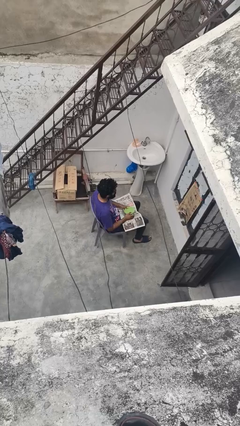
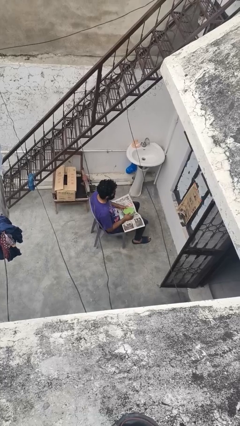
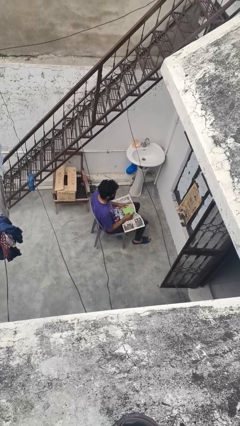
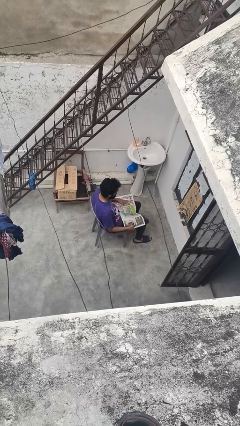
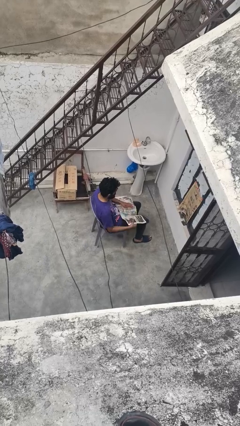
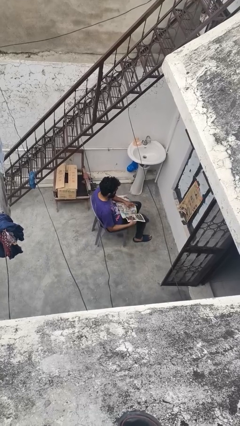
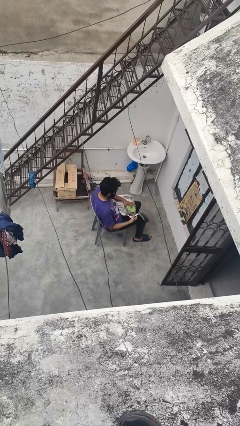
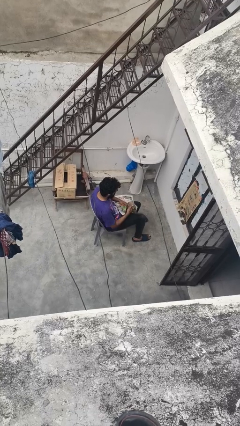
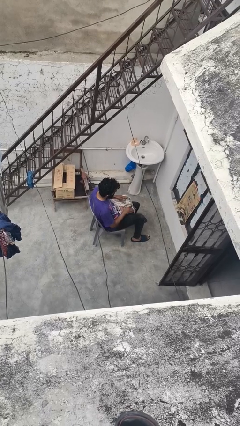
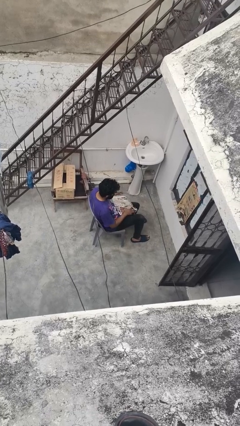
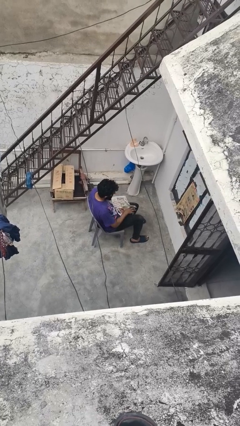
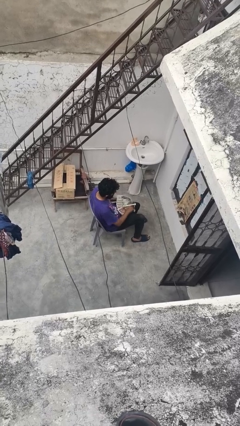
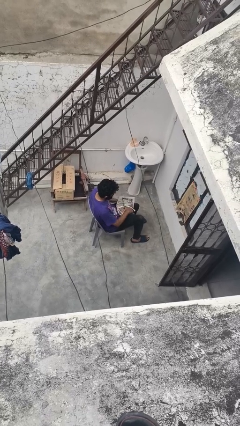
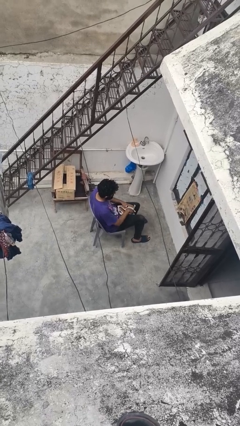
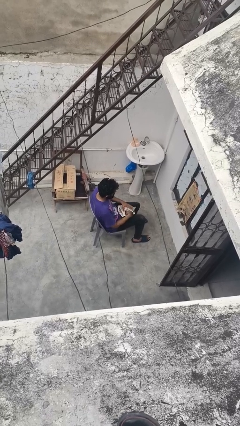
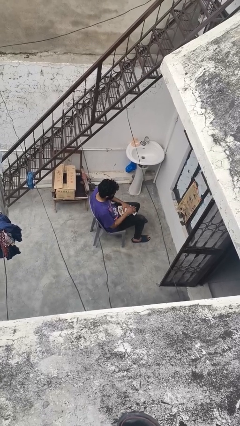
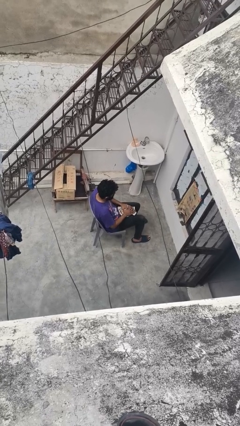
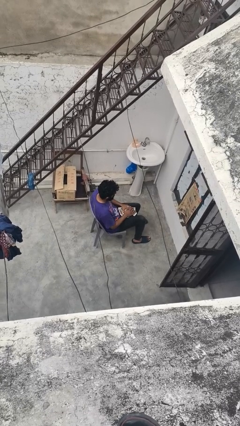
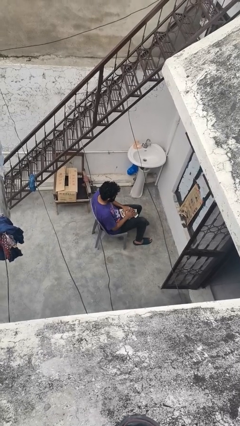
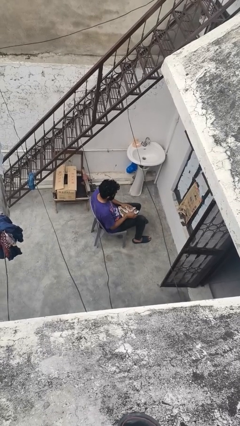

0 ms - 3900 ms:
person wraps box

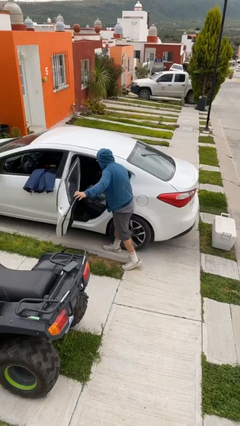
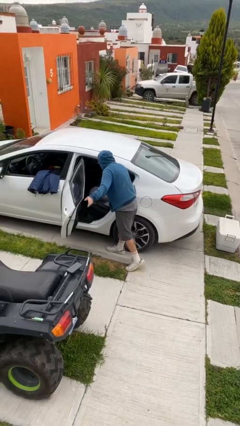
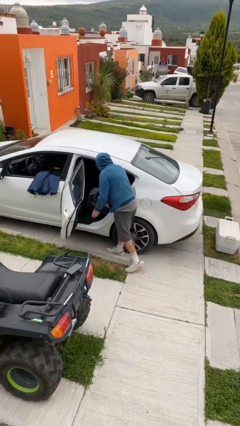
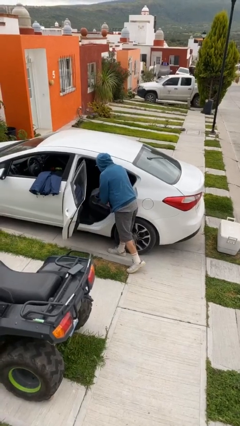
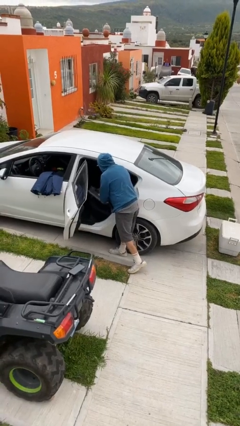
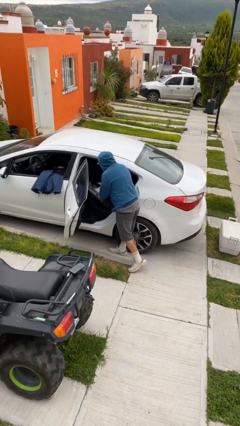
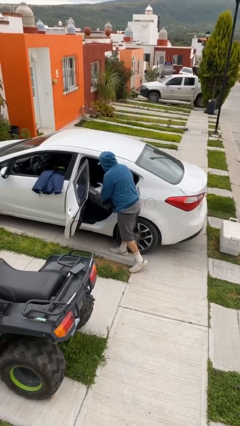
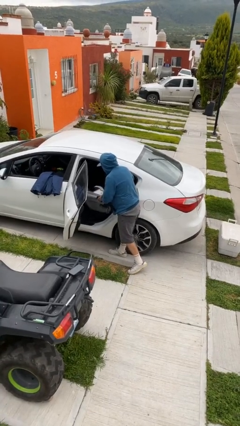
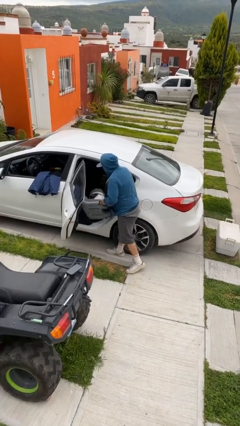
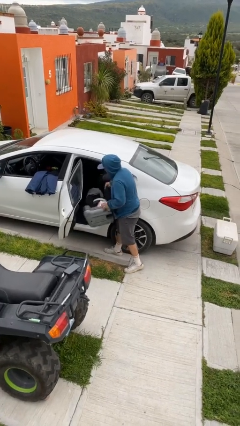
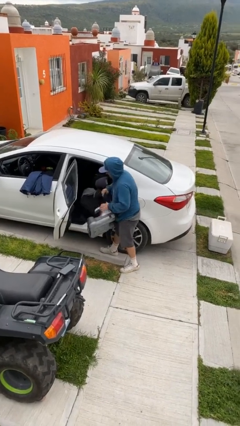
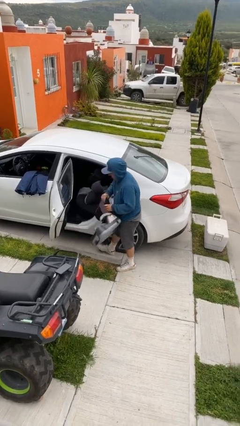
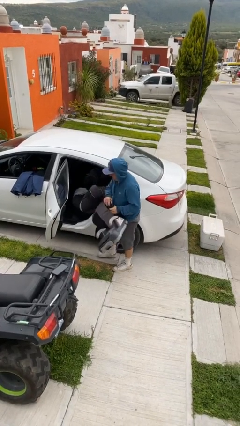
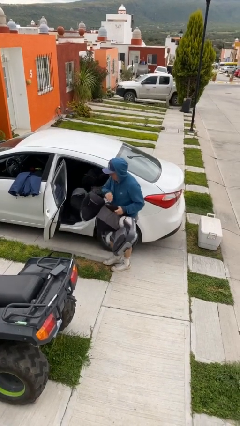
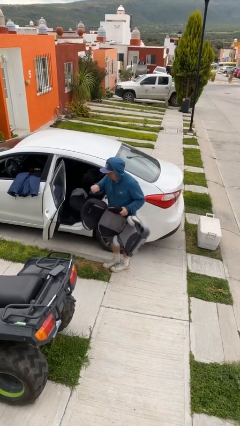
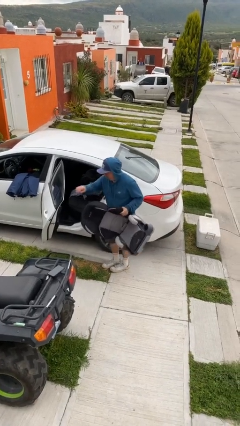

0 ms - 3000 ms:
person unloads car

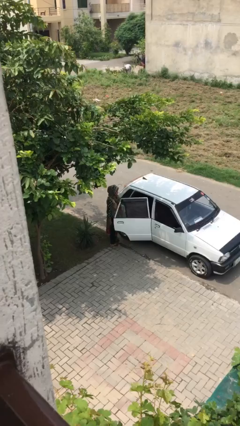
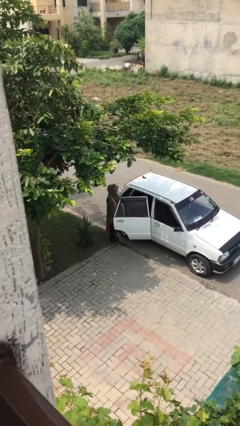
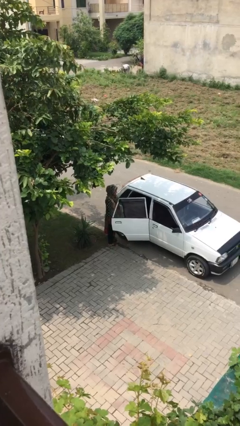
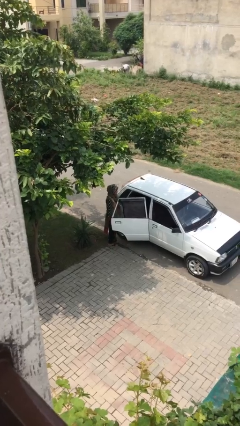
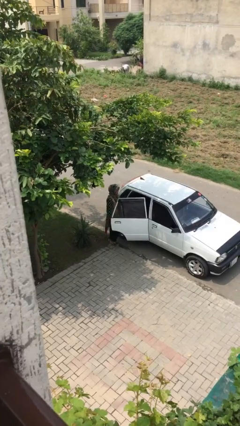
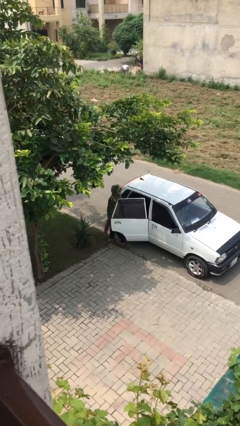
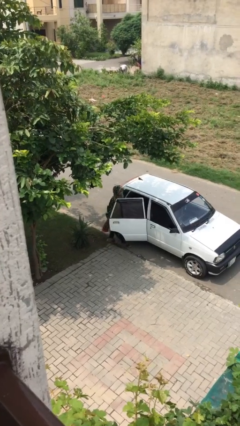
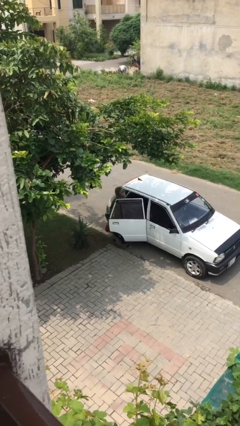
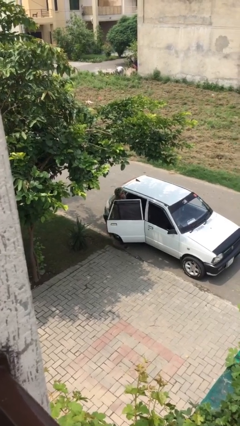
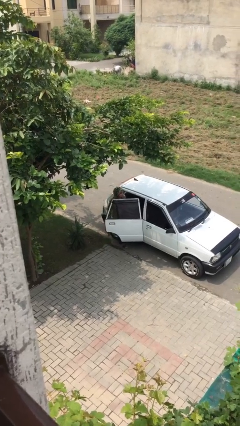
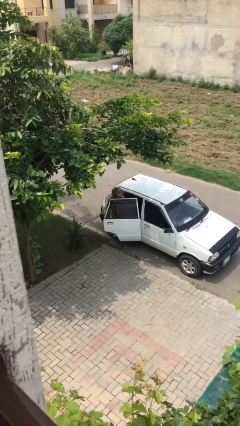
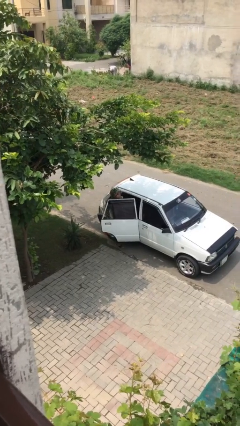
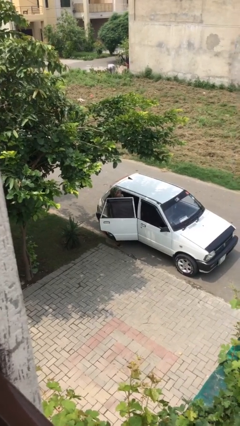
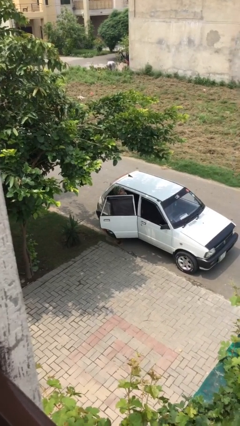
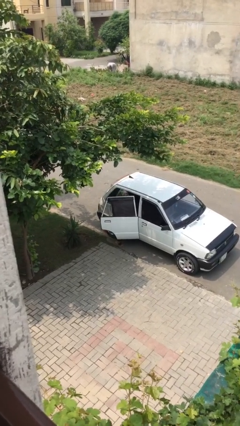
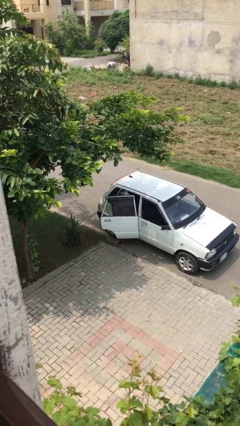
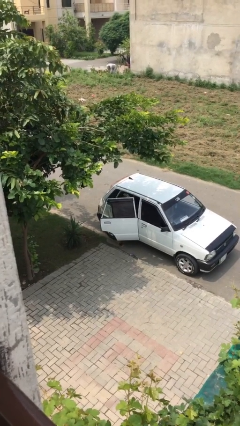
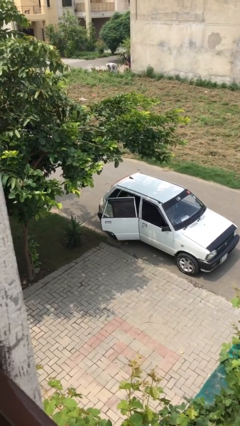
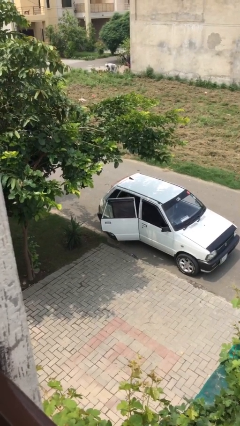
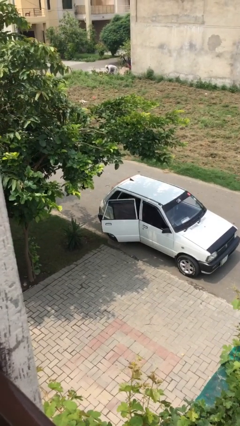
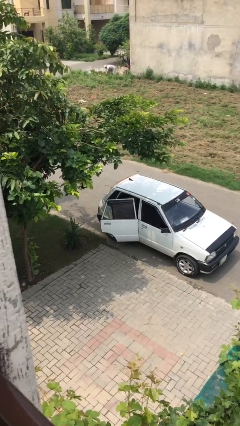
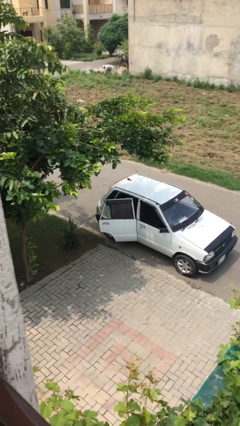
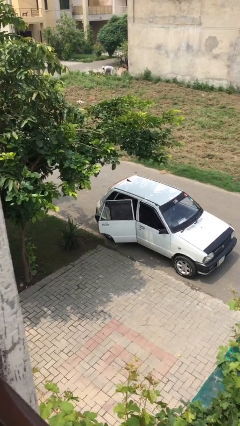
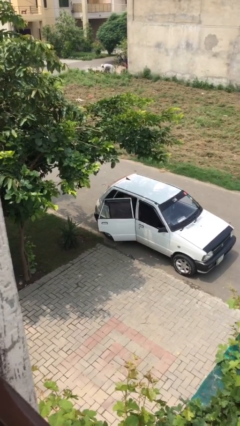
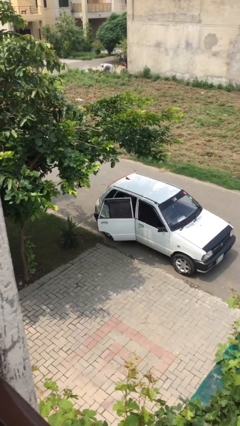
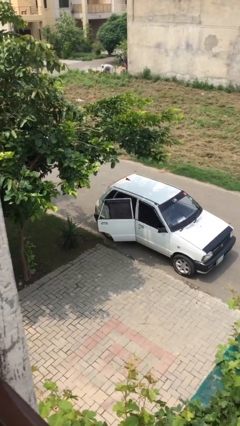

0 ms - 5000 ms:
person enters car

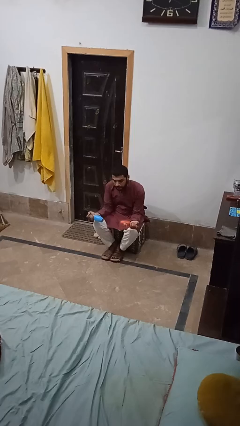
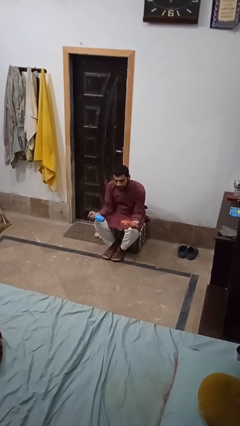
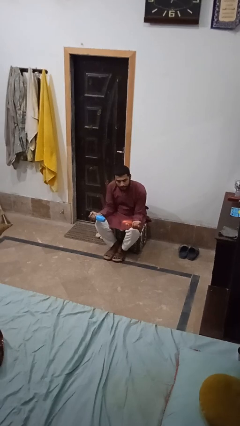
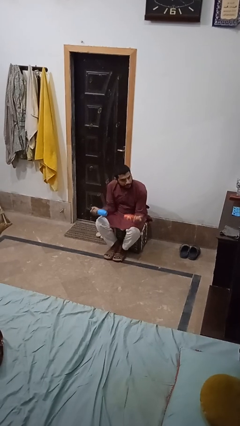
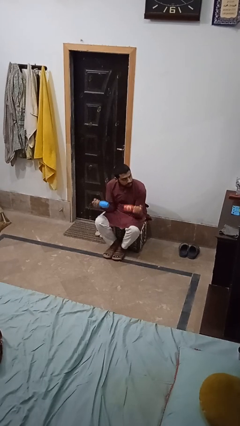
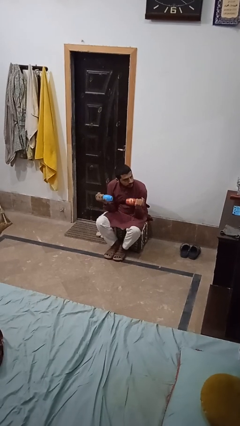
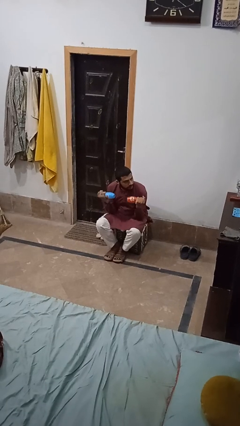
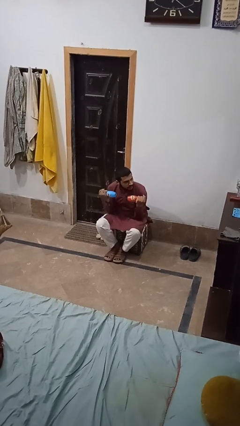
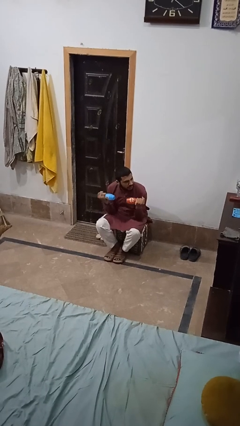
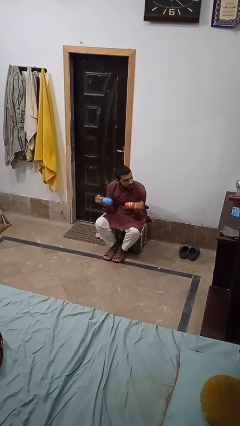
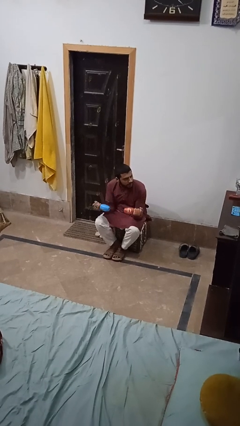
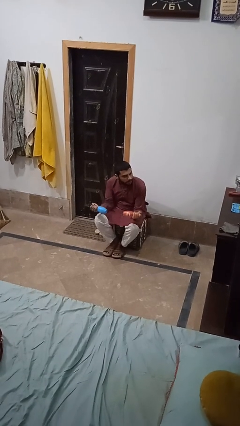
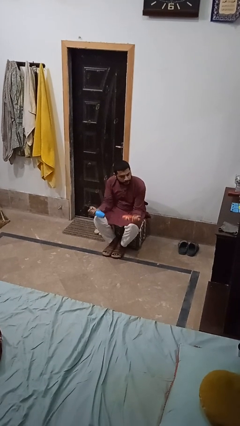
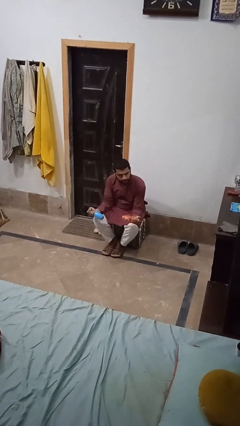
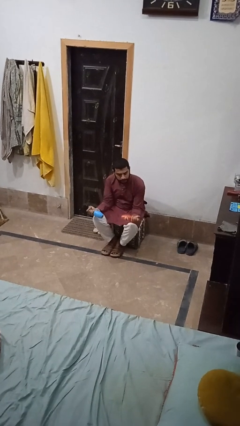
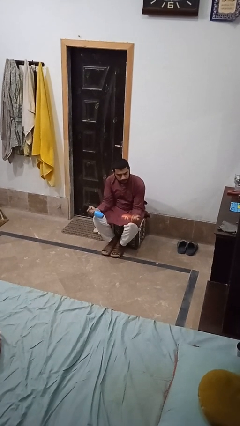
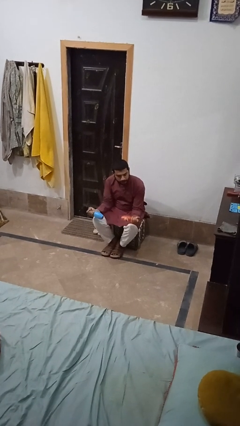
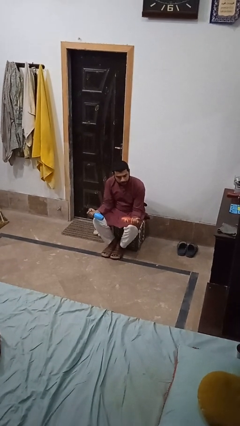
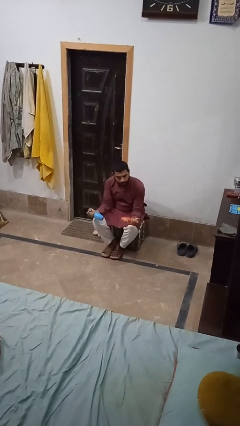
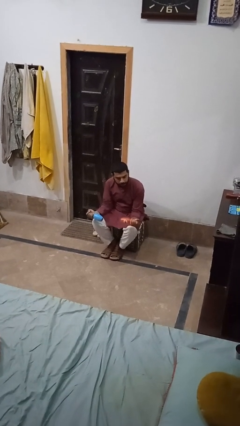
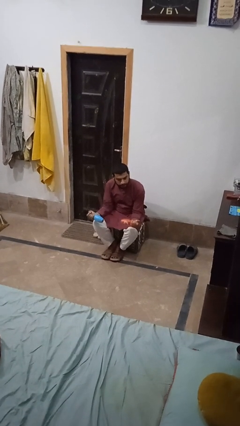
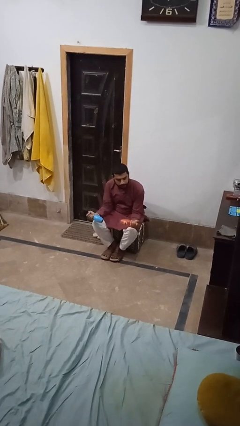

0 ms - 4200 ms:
person lifts dumbbells

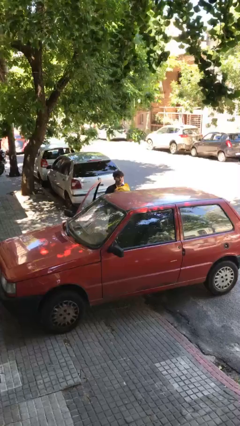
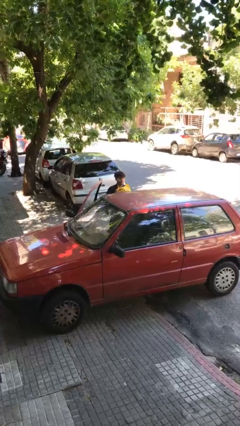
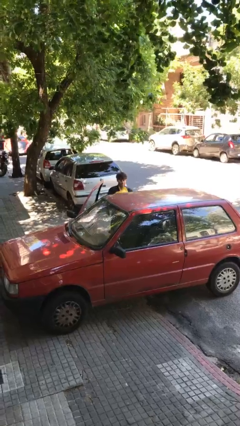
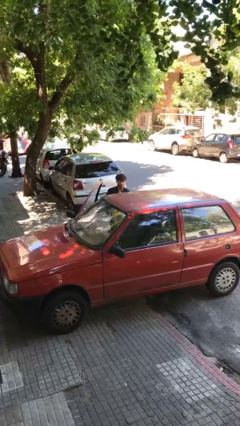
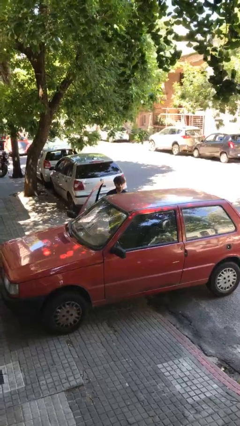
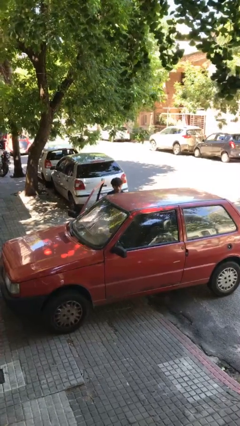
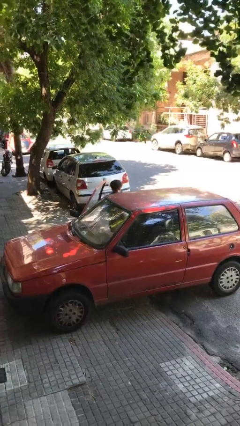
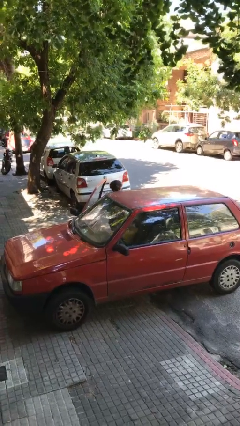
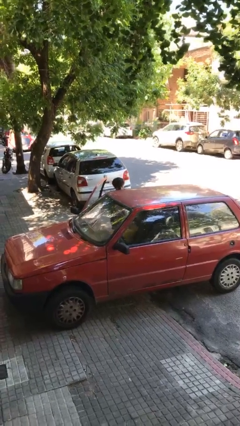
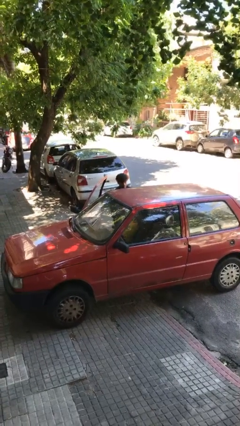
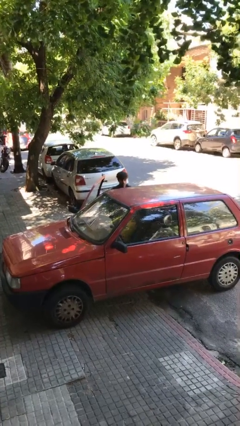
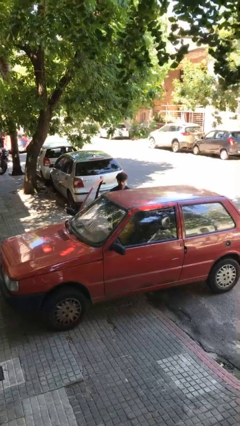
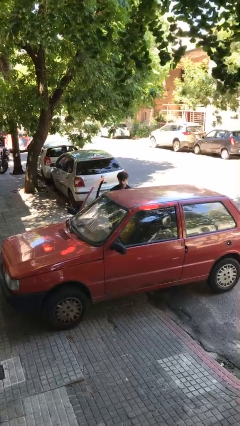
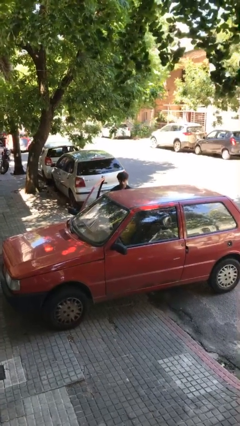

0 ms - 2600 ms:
person loads car
